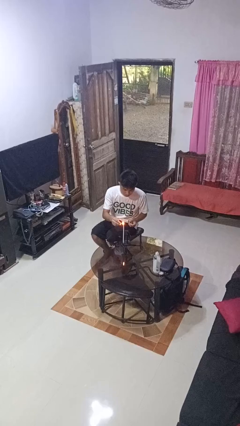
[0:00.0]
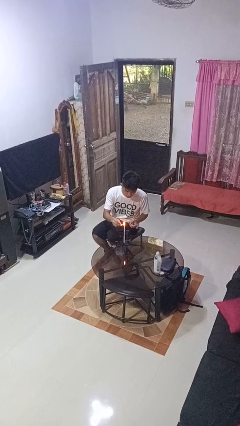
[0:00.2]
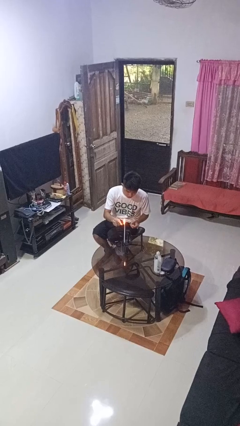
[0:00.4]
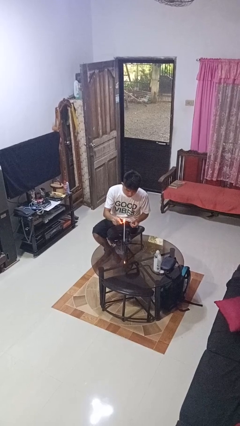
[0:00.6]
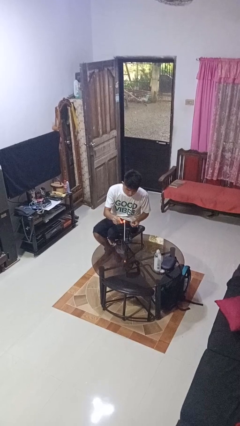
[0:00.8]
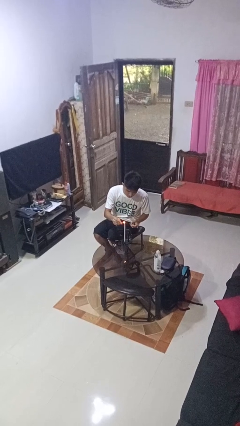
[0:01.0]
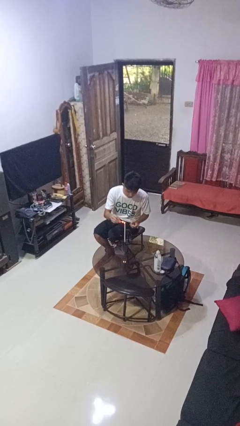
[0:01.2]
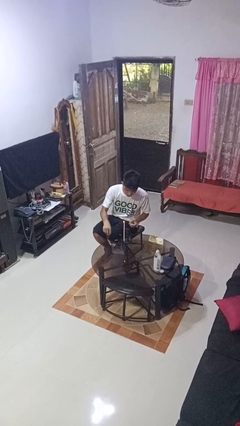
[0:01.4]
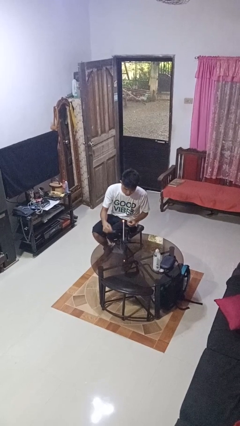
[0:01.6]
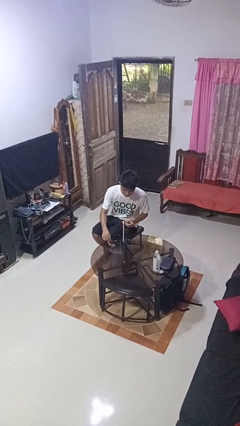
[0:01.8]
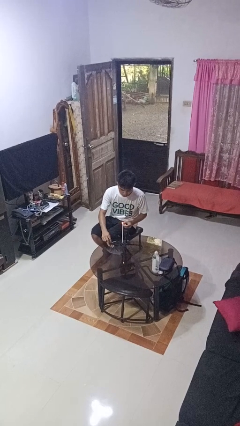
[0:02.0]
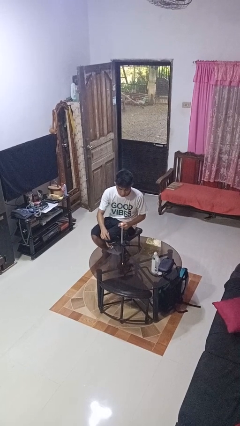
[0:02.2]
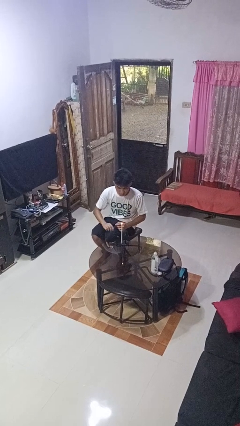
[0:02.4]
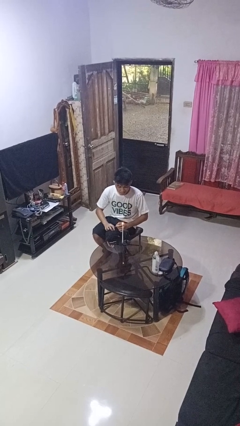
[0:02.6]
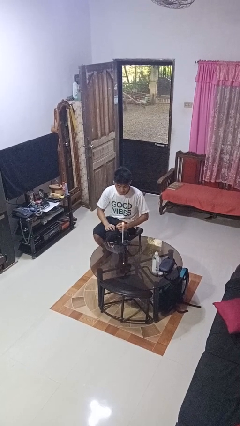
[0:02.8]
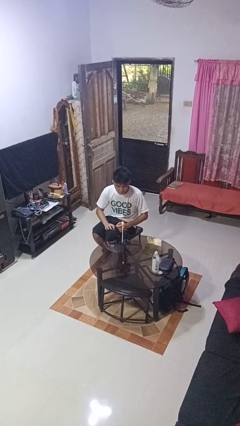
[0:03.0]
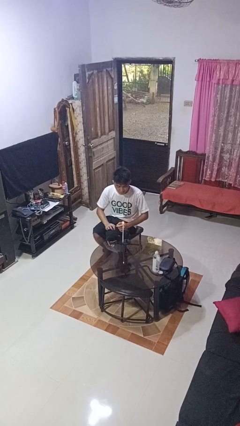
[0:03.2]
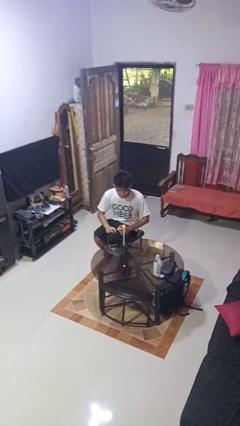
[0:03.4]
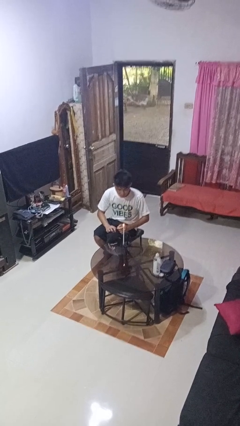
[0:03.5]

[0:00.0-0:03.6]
person lights candle

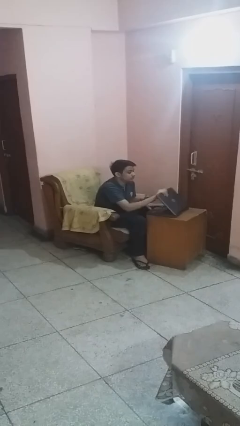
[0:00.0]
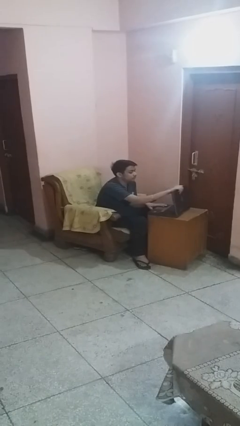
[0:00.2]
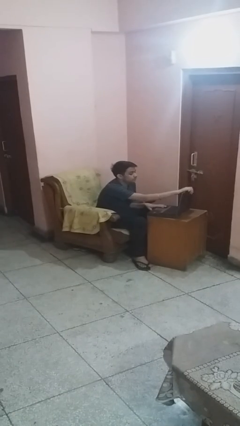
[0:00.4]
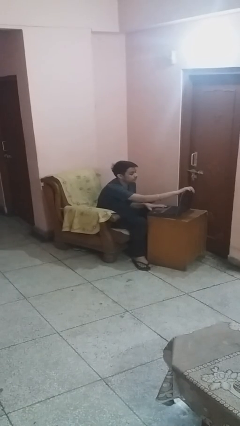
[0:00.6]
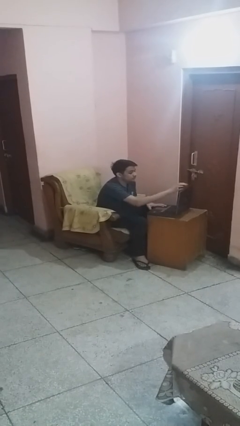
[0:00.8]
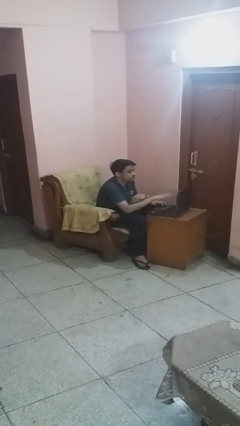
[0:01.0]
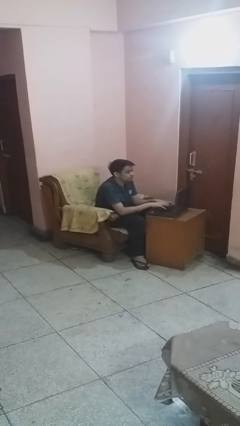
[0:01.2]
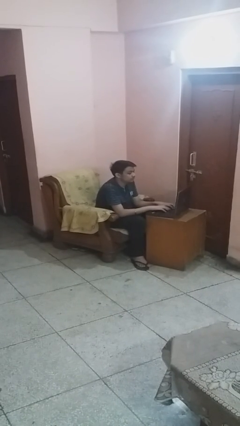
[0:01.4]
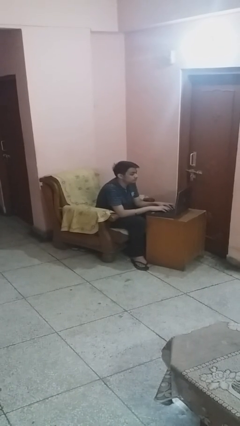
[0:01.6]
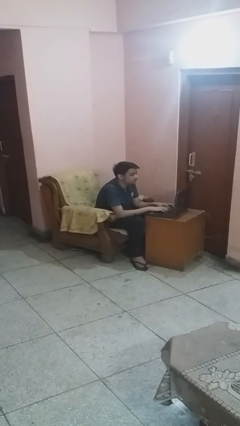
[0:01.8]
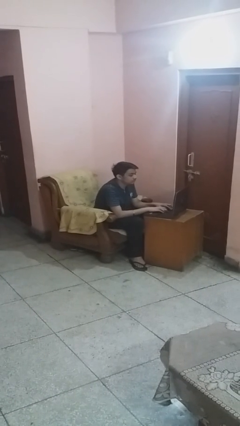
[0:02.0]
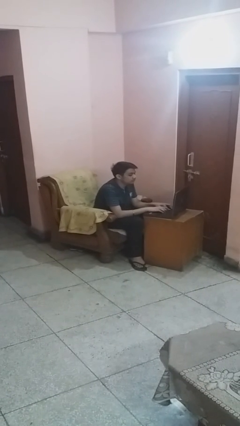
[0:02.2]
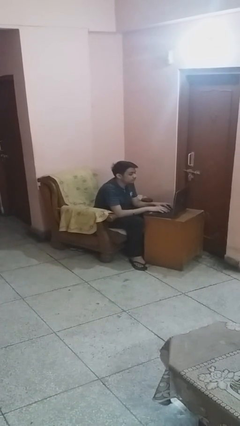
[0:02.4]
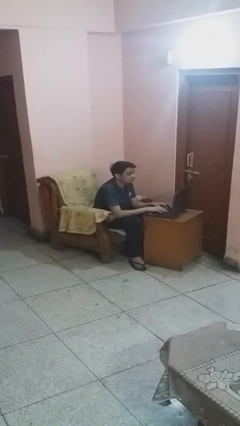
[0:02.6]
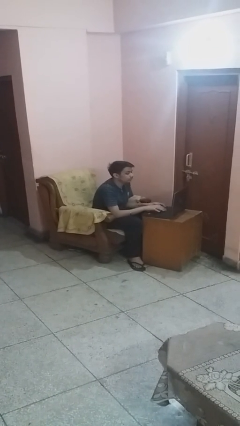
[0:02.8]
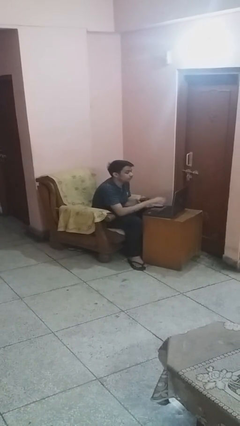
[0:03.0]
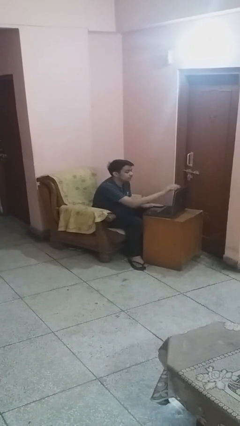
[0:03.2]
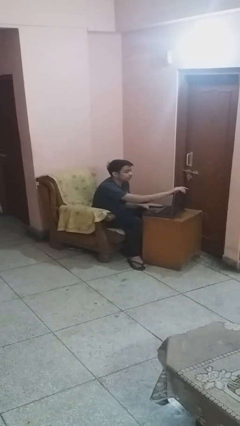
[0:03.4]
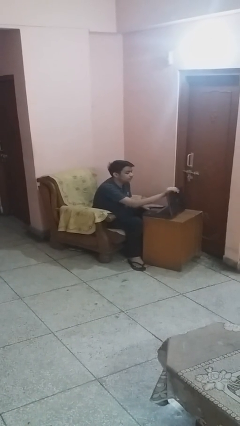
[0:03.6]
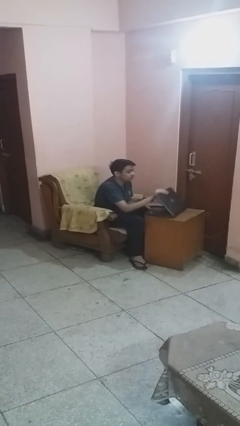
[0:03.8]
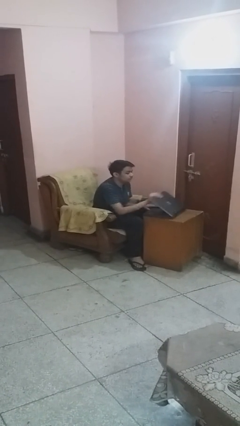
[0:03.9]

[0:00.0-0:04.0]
person interacts with laptop

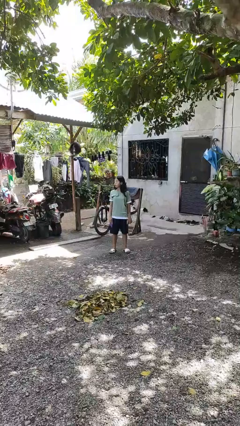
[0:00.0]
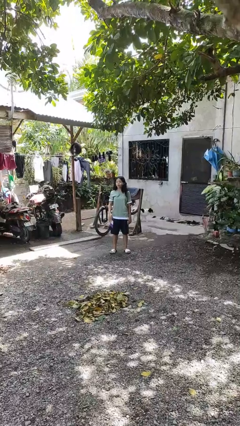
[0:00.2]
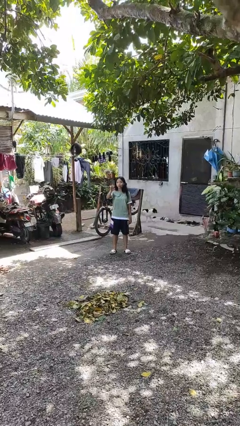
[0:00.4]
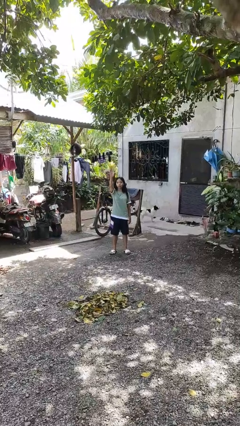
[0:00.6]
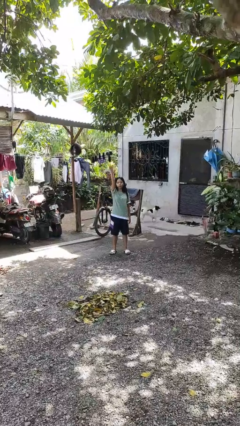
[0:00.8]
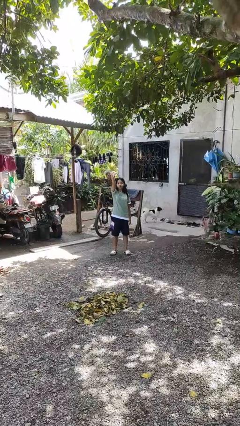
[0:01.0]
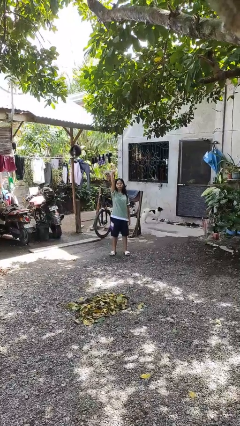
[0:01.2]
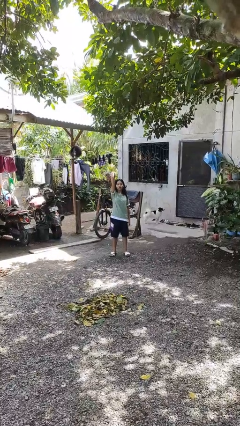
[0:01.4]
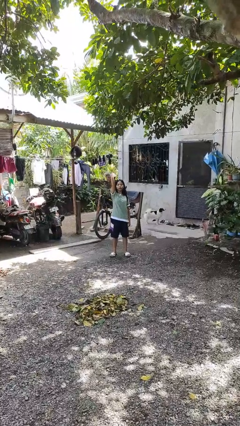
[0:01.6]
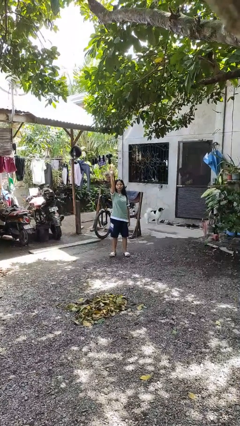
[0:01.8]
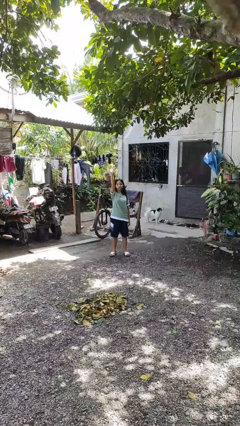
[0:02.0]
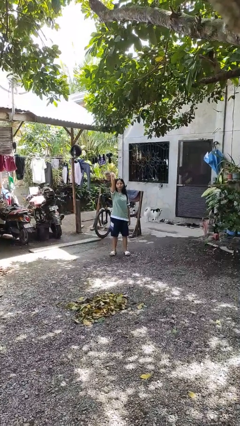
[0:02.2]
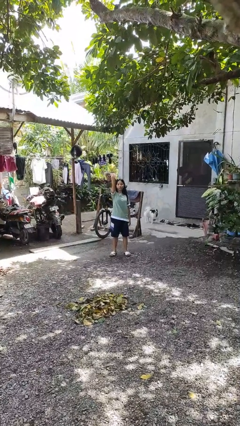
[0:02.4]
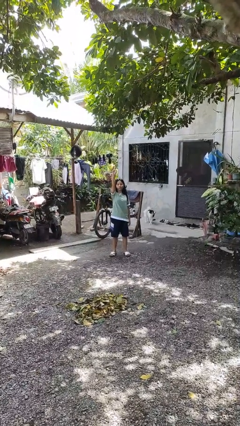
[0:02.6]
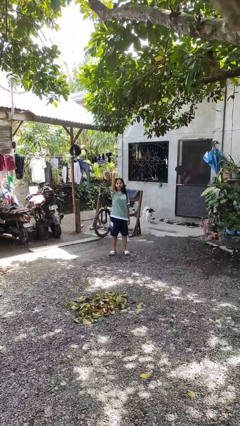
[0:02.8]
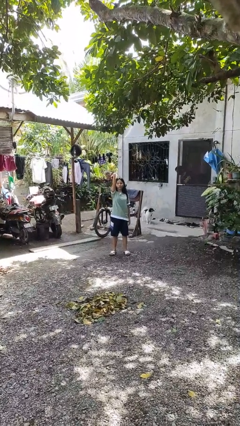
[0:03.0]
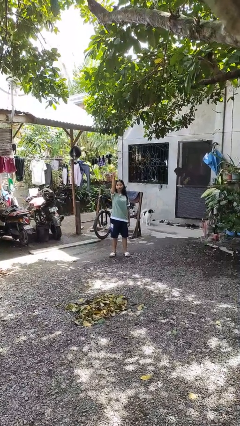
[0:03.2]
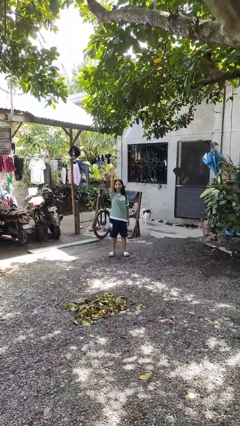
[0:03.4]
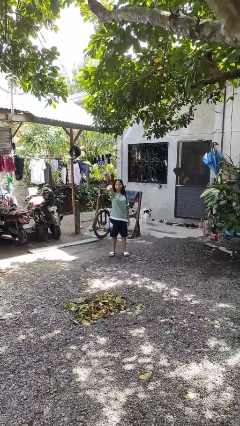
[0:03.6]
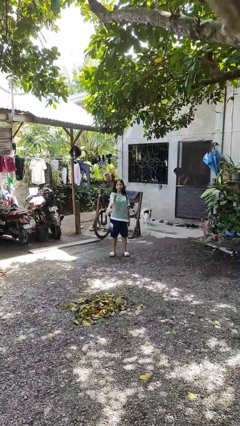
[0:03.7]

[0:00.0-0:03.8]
person gestures come here

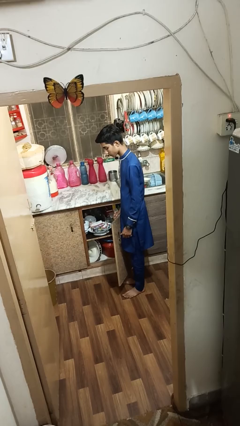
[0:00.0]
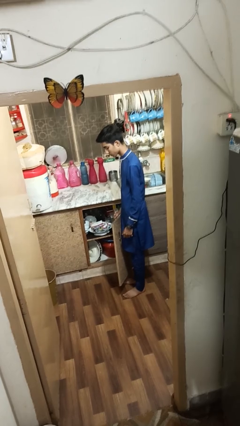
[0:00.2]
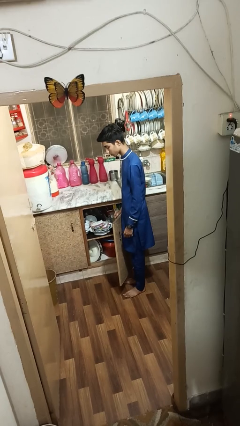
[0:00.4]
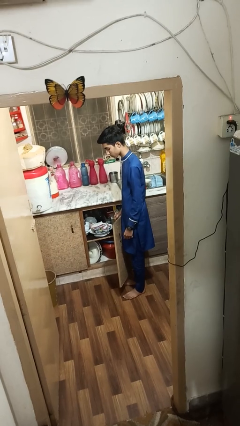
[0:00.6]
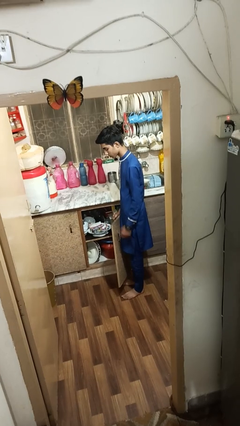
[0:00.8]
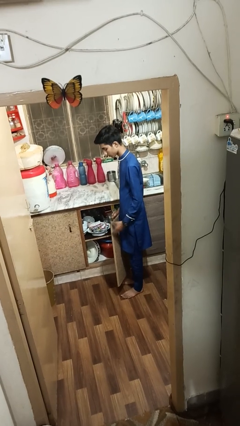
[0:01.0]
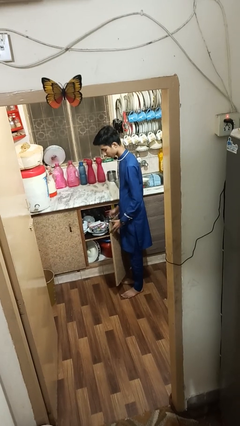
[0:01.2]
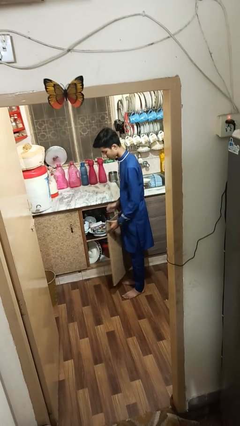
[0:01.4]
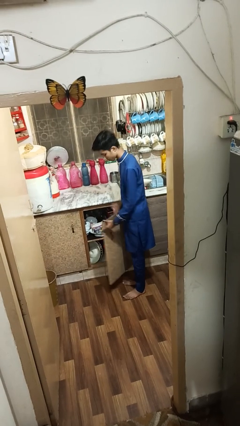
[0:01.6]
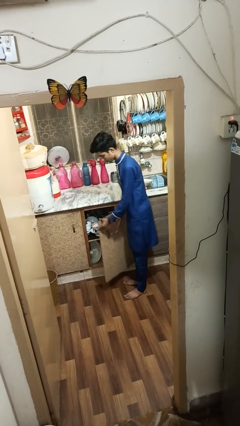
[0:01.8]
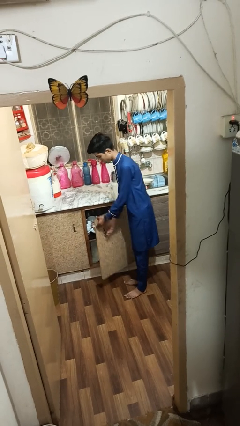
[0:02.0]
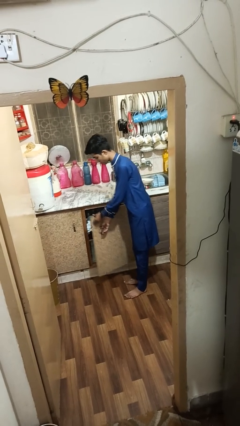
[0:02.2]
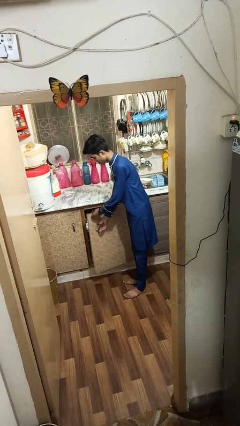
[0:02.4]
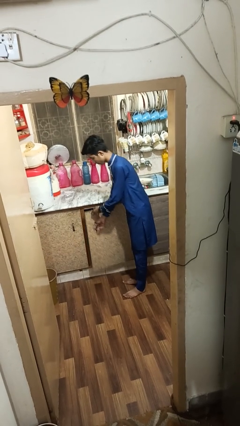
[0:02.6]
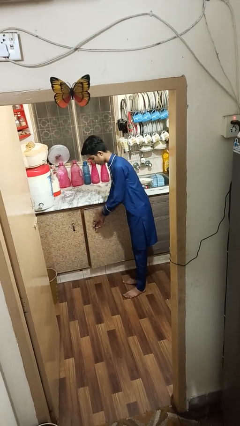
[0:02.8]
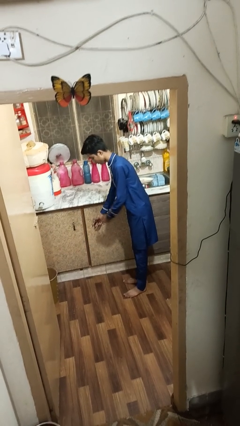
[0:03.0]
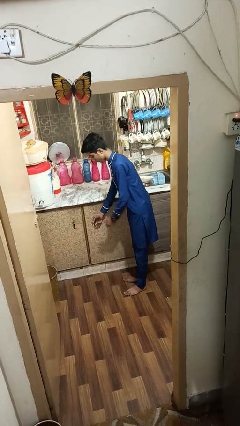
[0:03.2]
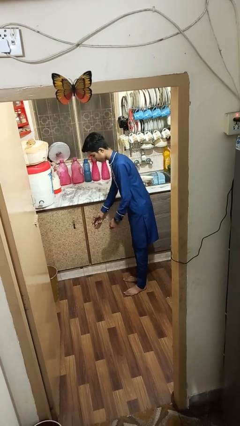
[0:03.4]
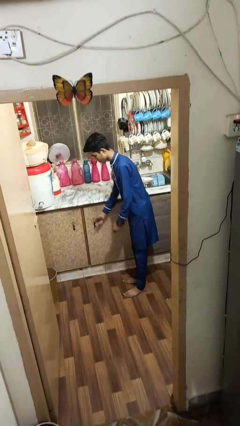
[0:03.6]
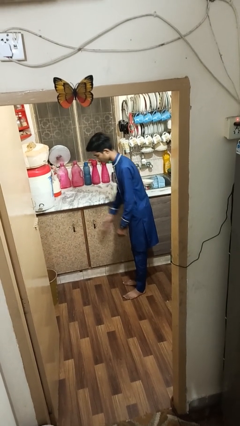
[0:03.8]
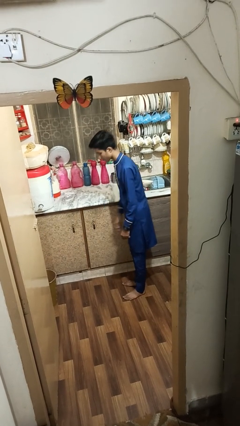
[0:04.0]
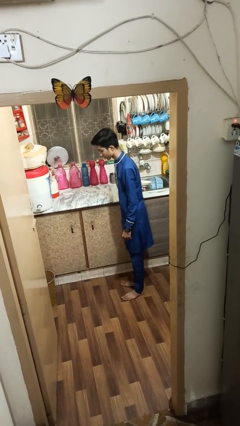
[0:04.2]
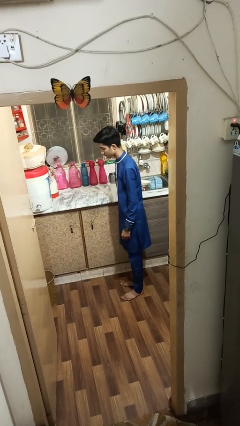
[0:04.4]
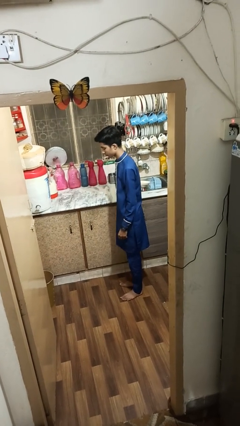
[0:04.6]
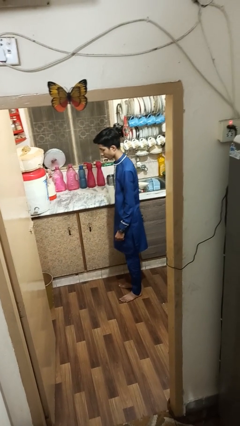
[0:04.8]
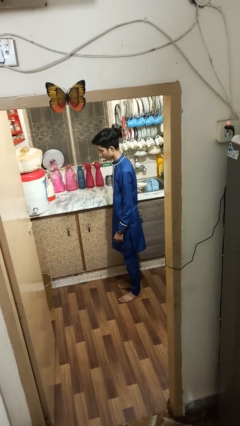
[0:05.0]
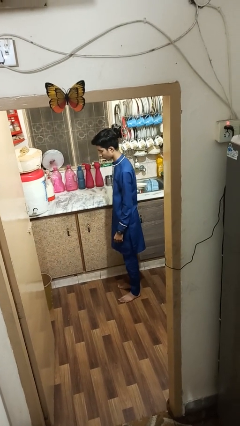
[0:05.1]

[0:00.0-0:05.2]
person closes cabinet

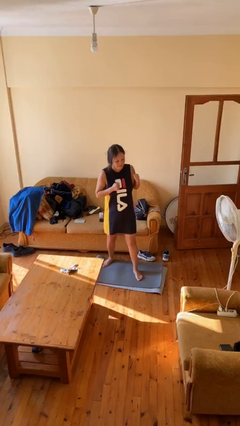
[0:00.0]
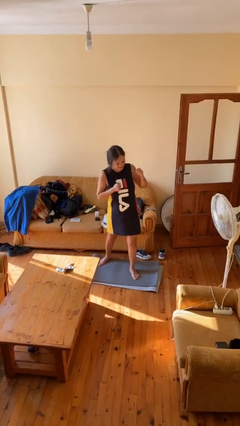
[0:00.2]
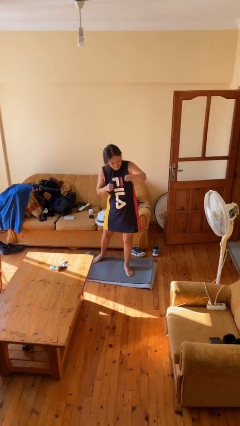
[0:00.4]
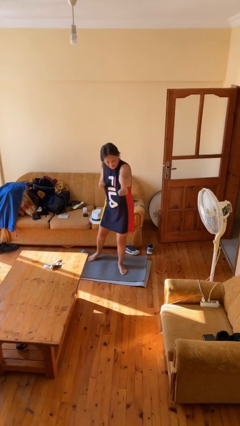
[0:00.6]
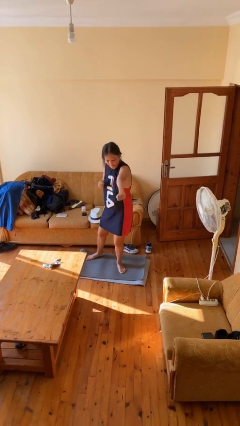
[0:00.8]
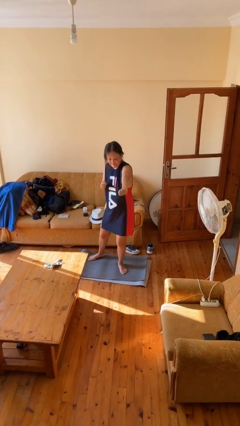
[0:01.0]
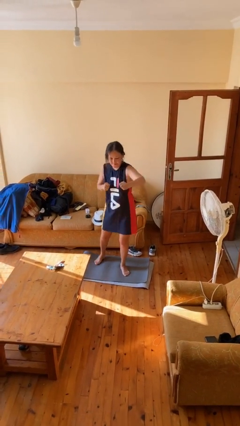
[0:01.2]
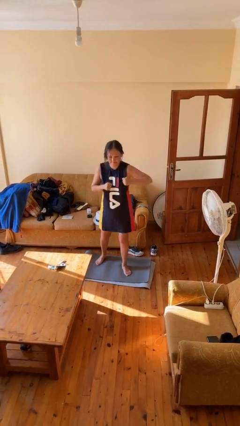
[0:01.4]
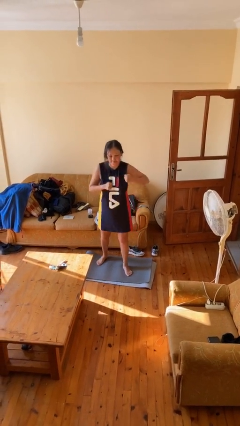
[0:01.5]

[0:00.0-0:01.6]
person punches
